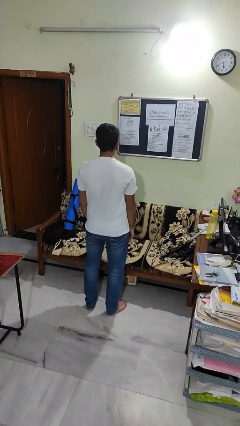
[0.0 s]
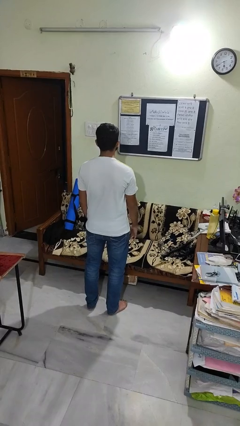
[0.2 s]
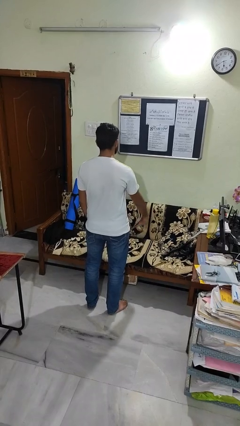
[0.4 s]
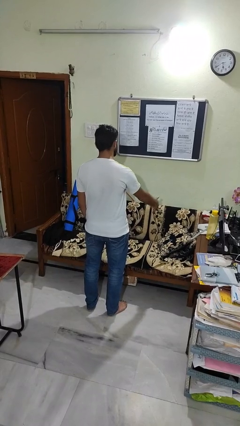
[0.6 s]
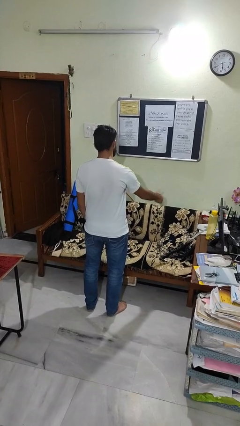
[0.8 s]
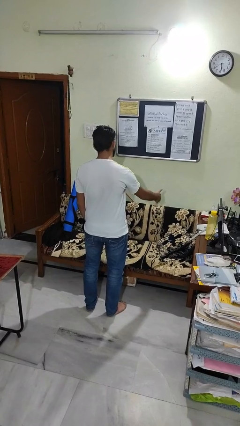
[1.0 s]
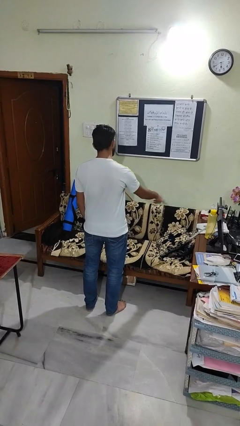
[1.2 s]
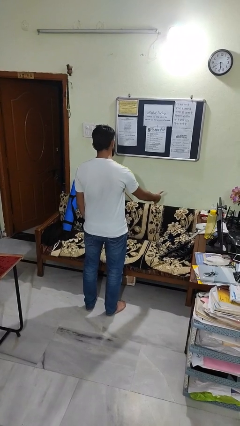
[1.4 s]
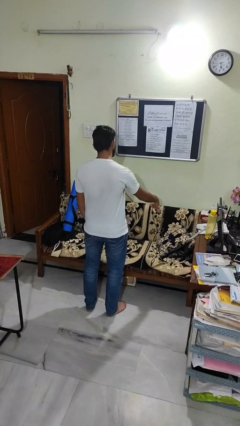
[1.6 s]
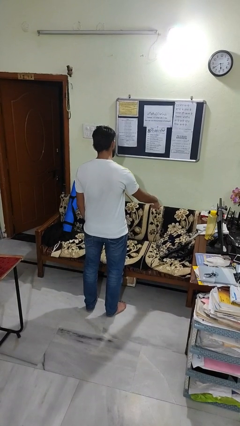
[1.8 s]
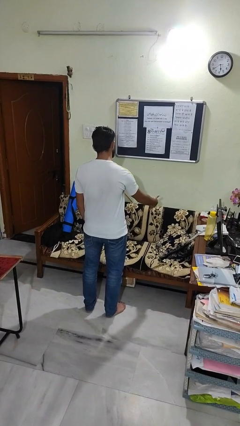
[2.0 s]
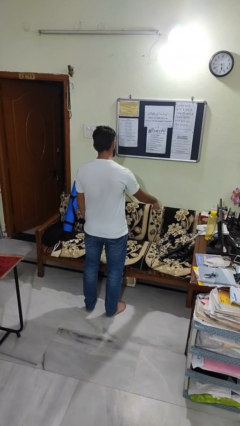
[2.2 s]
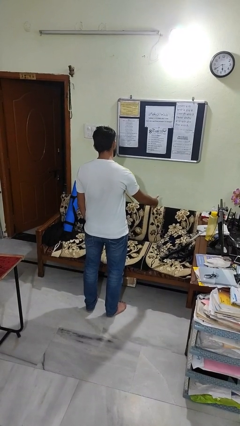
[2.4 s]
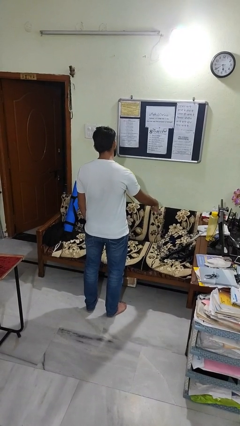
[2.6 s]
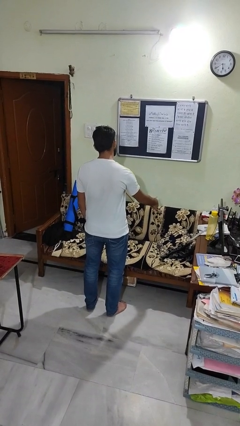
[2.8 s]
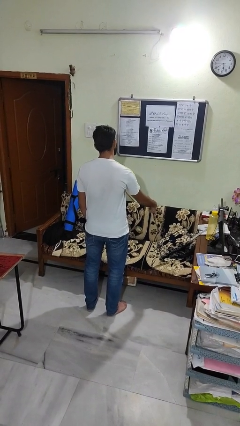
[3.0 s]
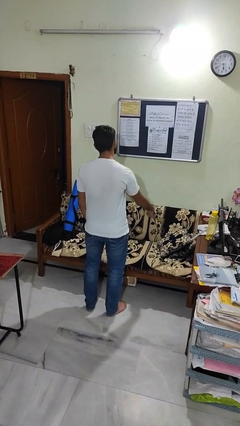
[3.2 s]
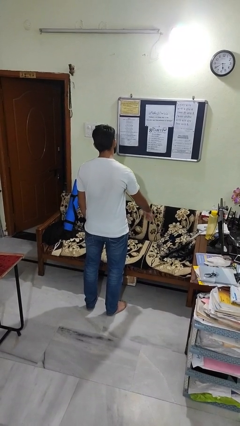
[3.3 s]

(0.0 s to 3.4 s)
person gestures hang loose

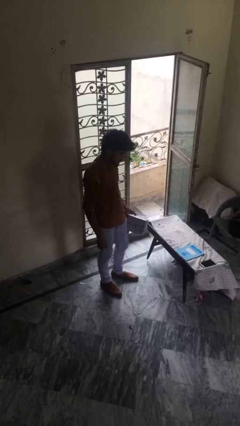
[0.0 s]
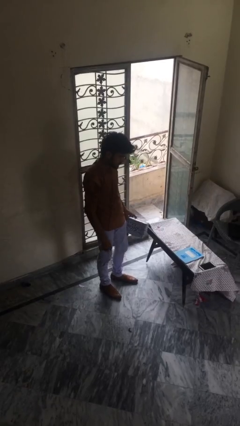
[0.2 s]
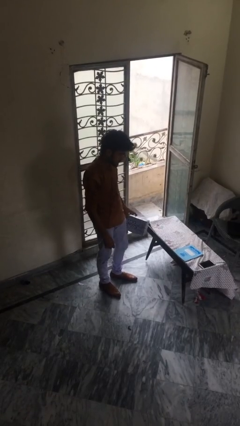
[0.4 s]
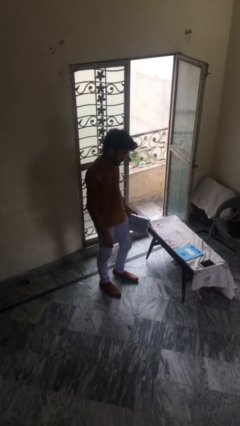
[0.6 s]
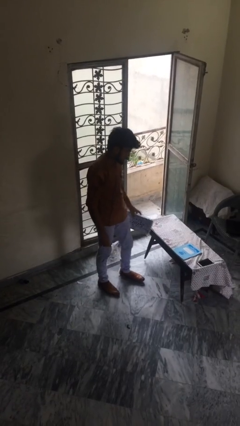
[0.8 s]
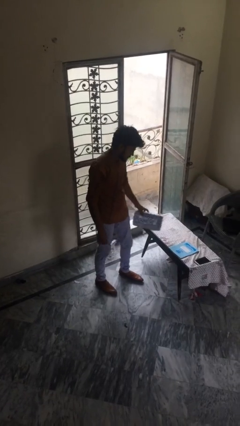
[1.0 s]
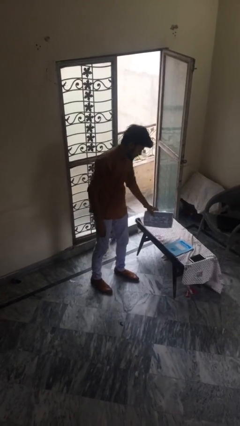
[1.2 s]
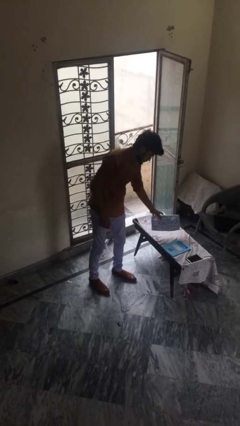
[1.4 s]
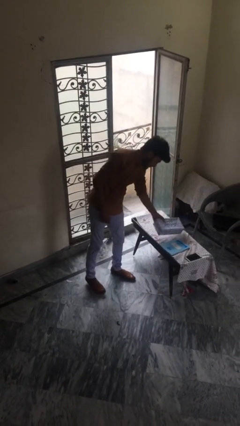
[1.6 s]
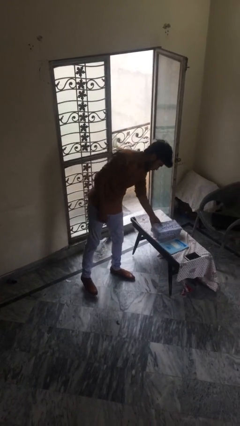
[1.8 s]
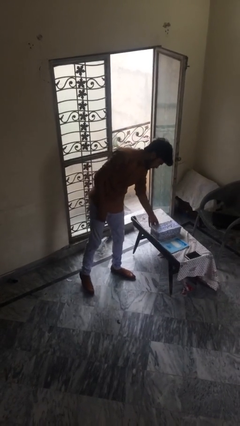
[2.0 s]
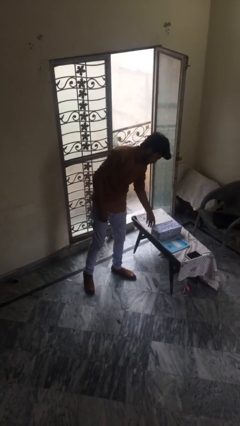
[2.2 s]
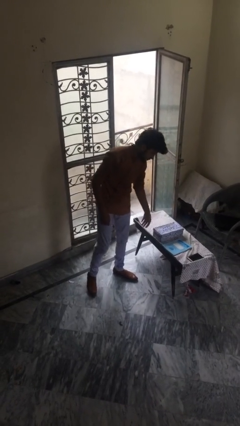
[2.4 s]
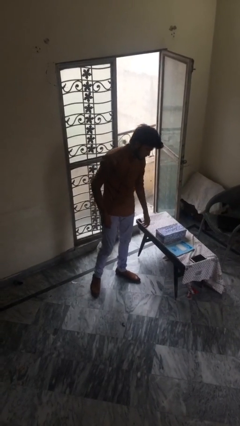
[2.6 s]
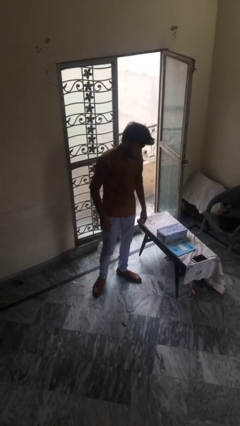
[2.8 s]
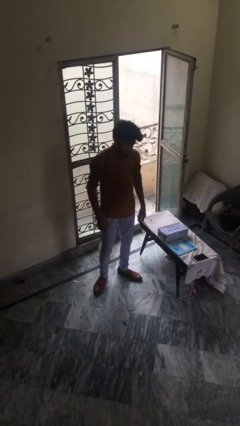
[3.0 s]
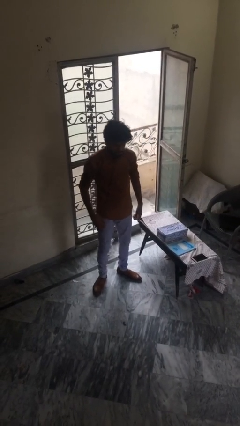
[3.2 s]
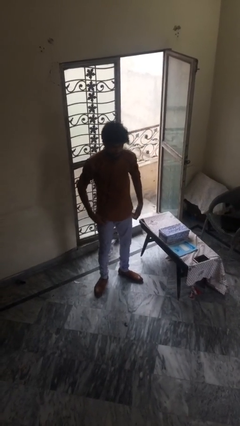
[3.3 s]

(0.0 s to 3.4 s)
person puts down object on table

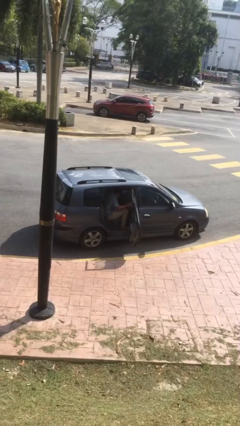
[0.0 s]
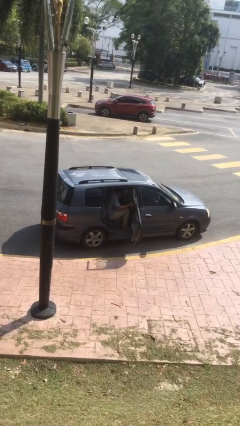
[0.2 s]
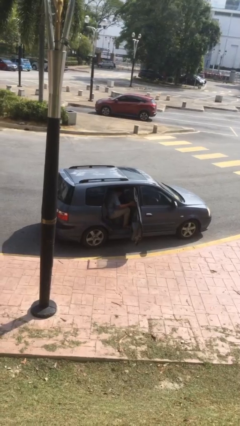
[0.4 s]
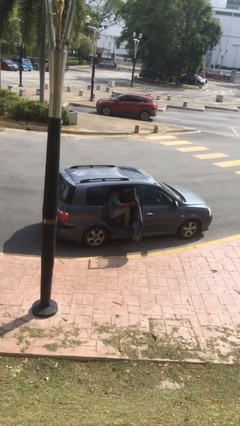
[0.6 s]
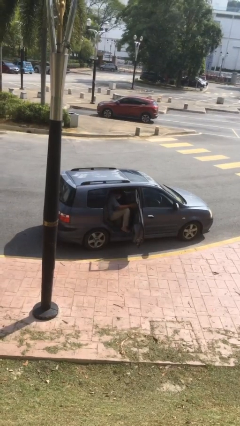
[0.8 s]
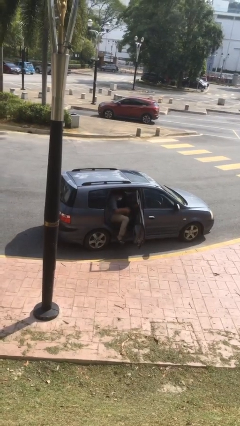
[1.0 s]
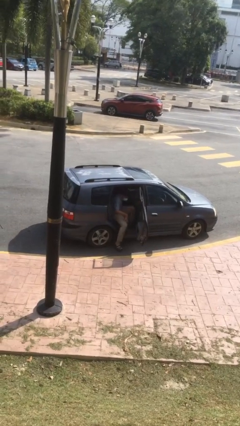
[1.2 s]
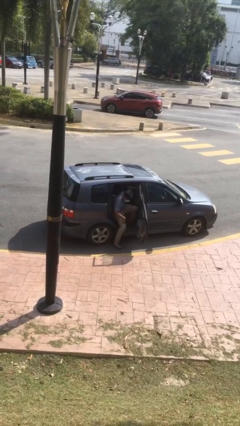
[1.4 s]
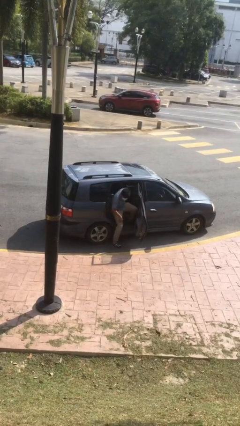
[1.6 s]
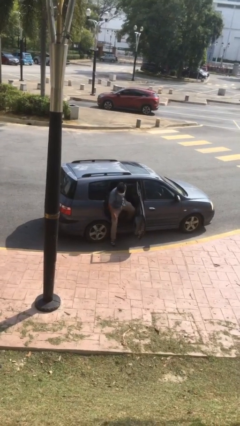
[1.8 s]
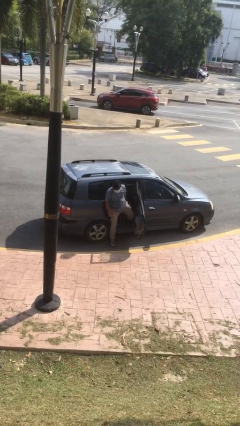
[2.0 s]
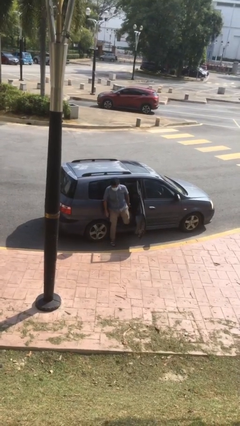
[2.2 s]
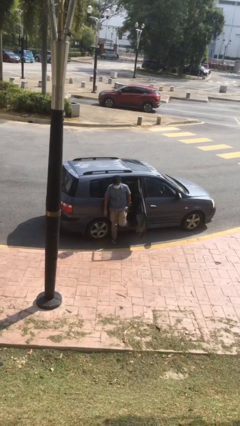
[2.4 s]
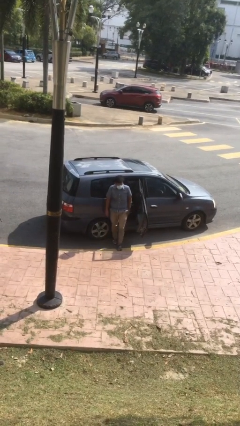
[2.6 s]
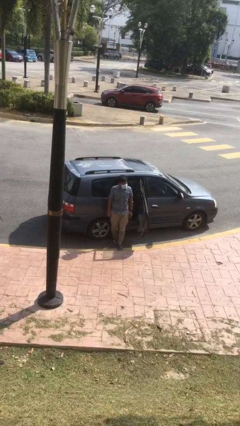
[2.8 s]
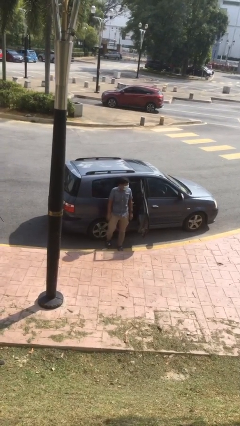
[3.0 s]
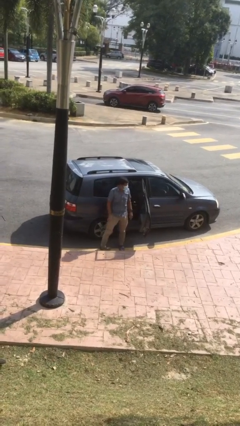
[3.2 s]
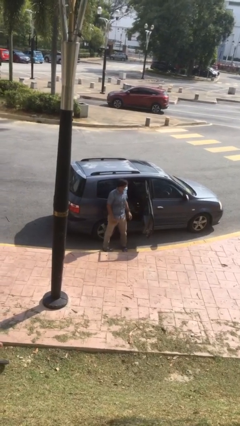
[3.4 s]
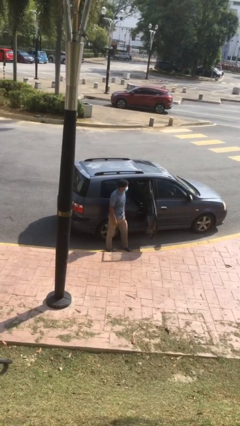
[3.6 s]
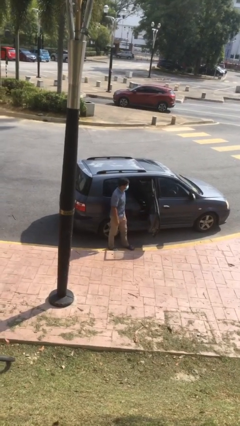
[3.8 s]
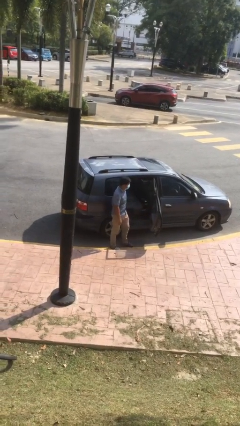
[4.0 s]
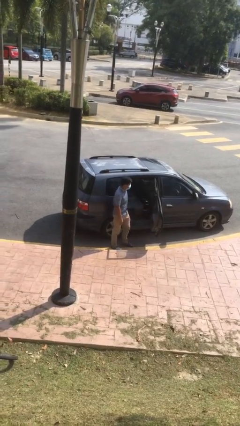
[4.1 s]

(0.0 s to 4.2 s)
person exits car

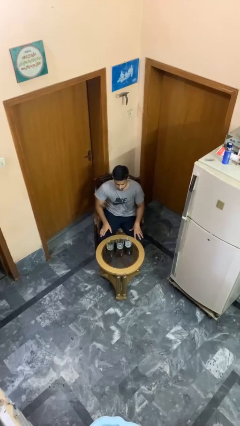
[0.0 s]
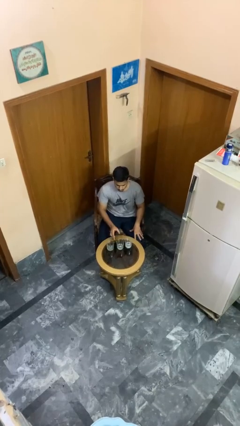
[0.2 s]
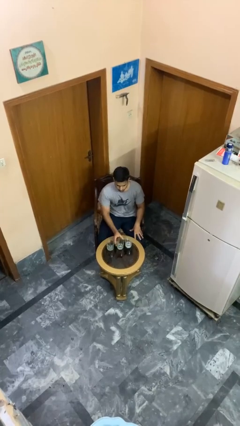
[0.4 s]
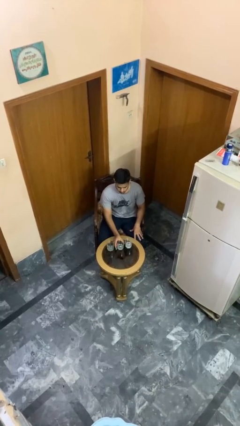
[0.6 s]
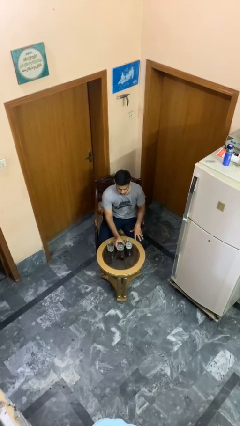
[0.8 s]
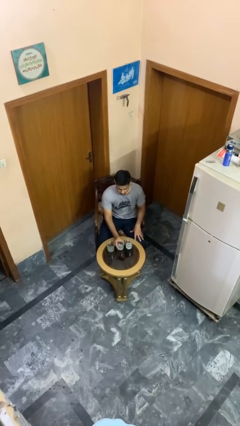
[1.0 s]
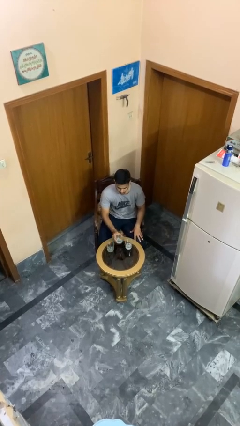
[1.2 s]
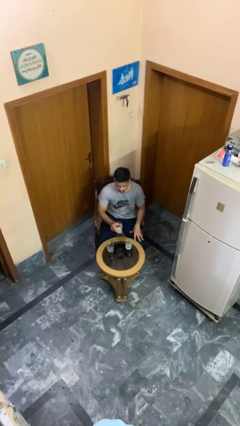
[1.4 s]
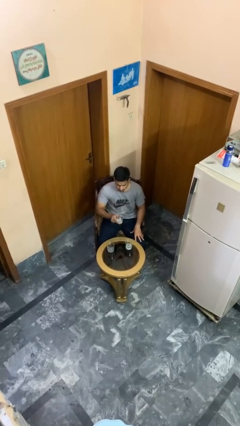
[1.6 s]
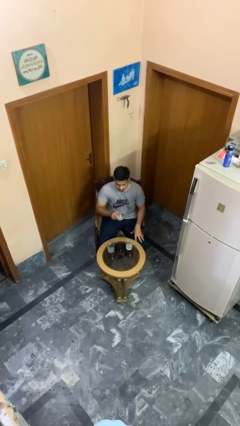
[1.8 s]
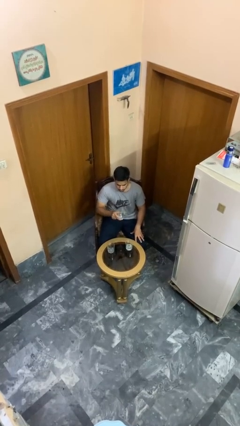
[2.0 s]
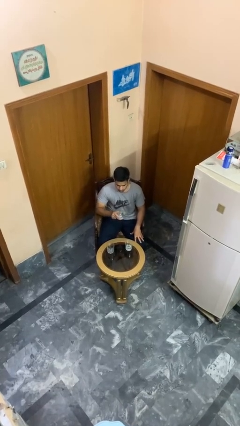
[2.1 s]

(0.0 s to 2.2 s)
person picks up object from table

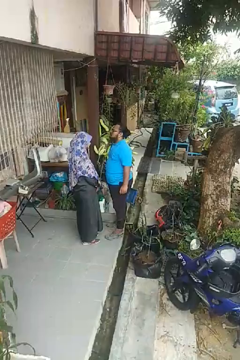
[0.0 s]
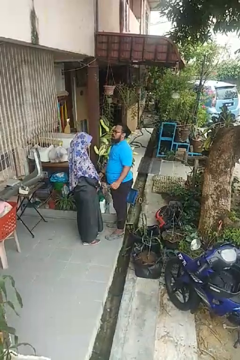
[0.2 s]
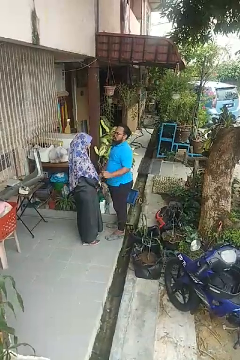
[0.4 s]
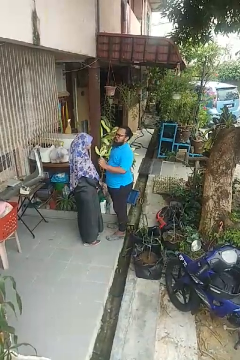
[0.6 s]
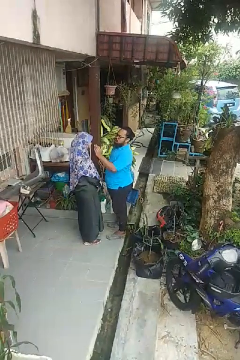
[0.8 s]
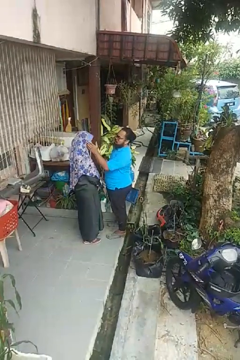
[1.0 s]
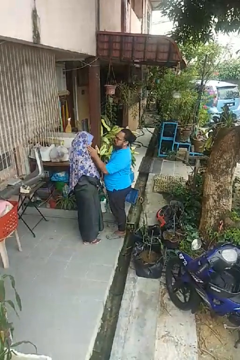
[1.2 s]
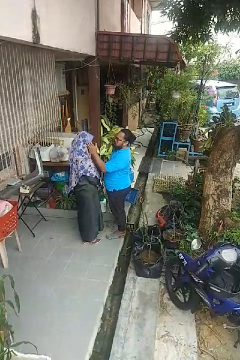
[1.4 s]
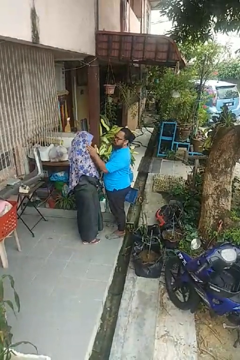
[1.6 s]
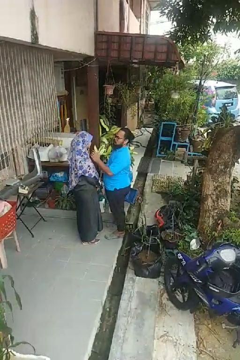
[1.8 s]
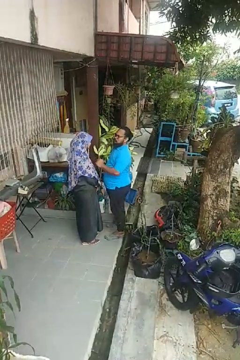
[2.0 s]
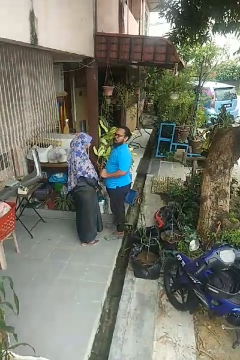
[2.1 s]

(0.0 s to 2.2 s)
person touches face of person

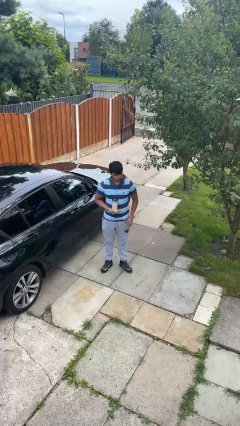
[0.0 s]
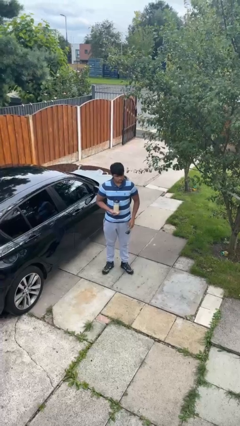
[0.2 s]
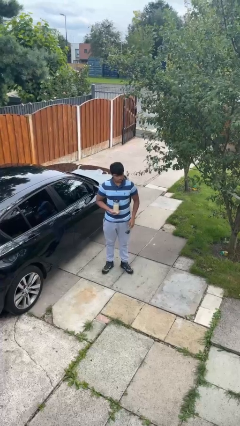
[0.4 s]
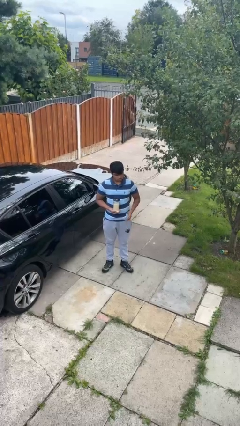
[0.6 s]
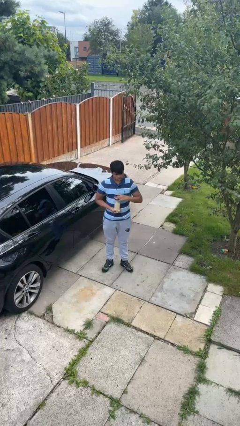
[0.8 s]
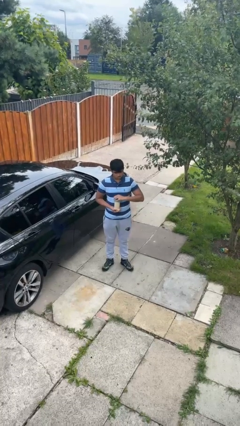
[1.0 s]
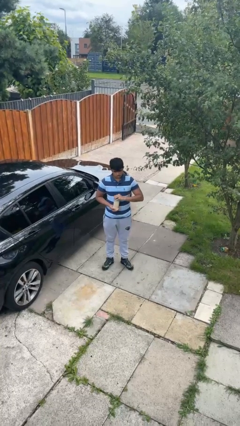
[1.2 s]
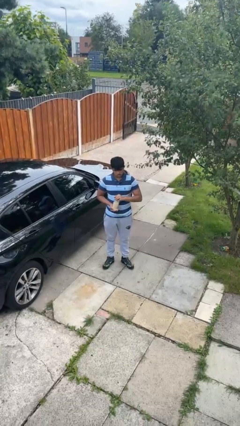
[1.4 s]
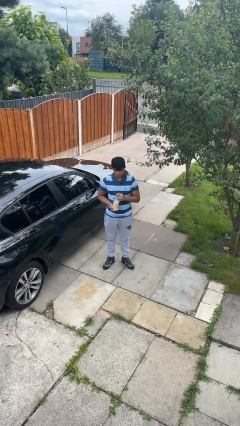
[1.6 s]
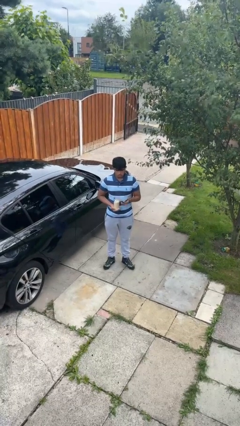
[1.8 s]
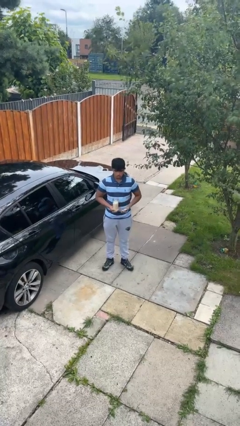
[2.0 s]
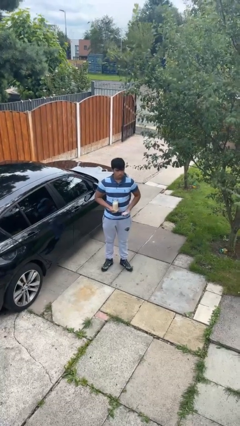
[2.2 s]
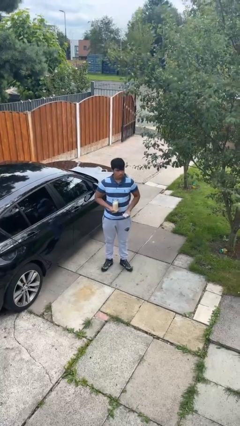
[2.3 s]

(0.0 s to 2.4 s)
person opens jar
